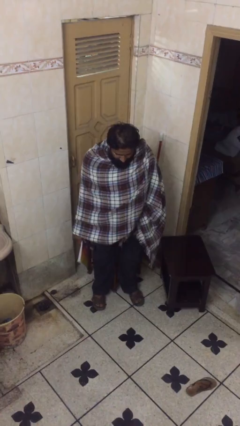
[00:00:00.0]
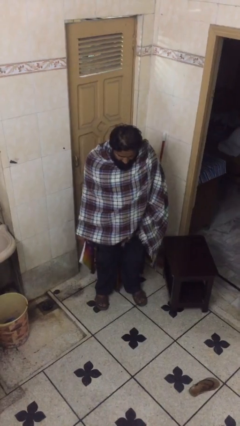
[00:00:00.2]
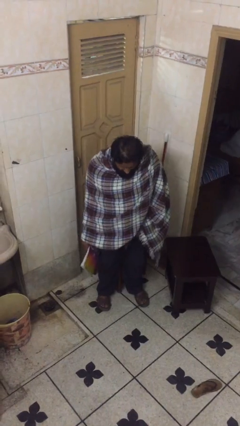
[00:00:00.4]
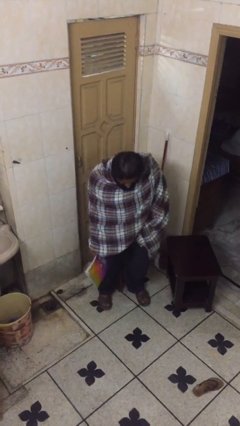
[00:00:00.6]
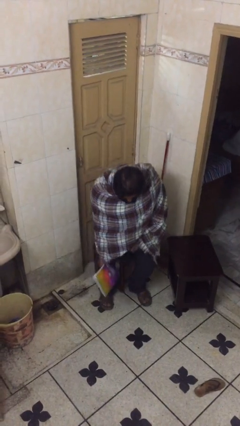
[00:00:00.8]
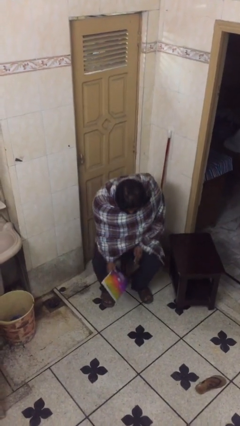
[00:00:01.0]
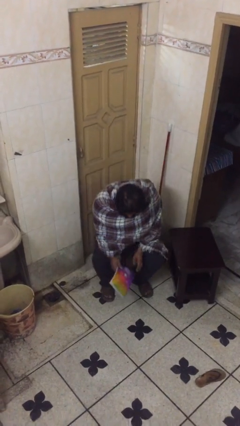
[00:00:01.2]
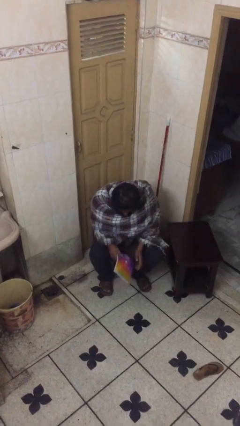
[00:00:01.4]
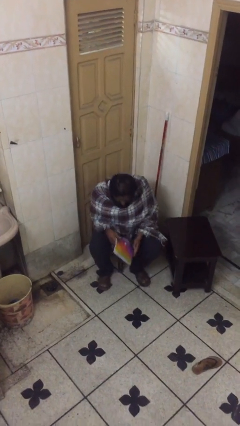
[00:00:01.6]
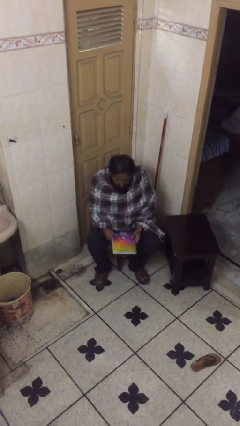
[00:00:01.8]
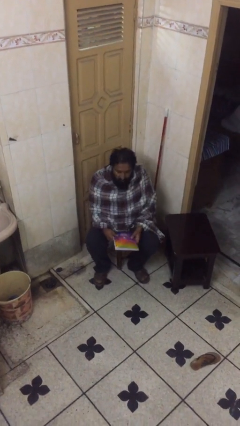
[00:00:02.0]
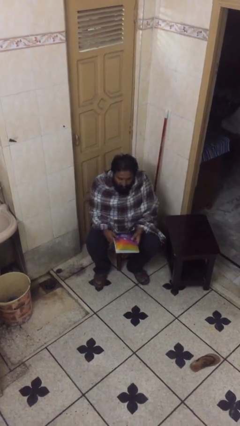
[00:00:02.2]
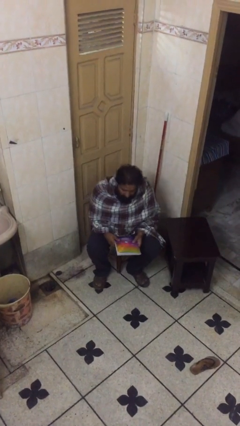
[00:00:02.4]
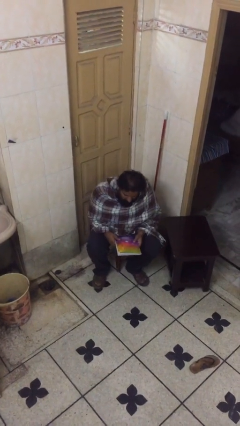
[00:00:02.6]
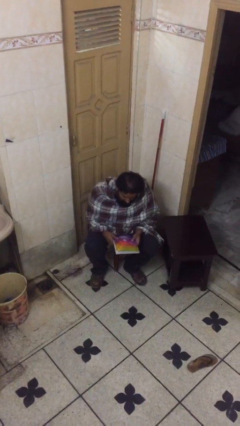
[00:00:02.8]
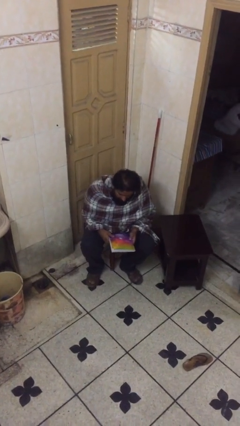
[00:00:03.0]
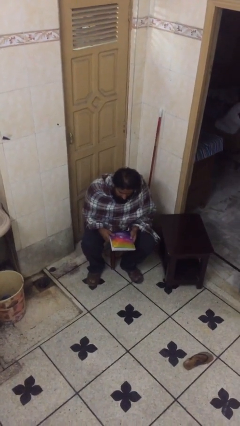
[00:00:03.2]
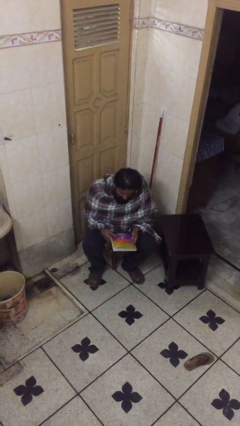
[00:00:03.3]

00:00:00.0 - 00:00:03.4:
person sits down

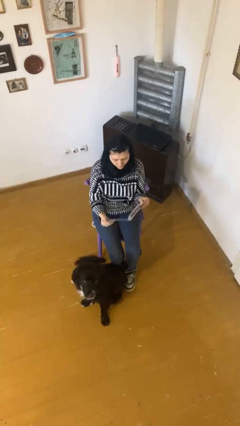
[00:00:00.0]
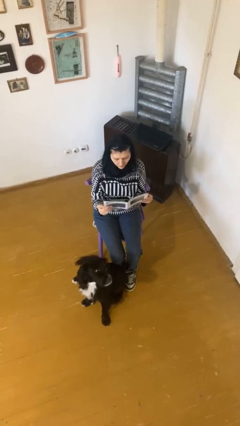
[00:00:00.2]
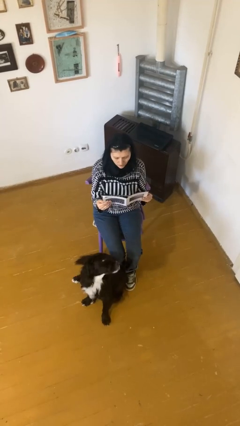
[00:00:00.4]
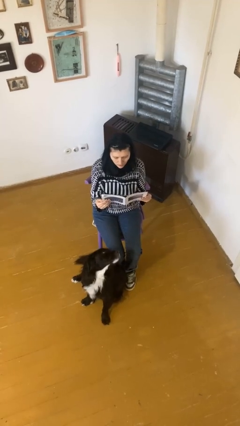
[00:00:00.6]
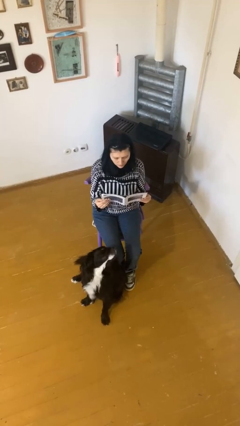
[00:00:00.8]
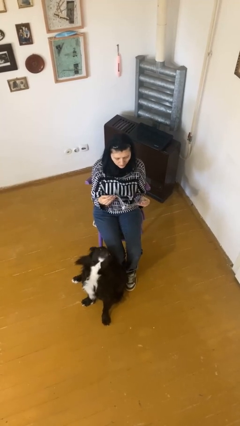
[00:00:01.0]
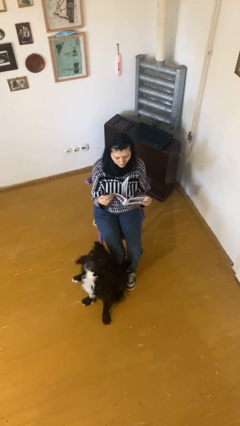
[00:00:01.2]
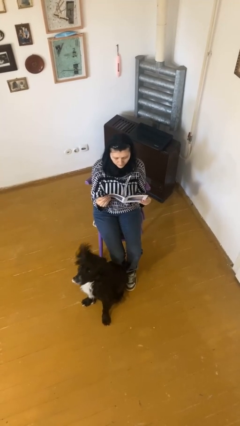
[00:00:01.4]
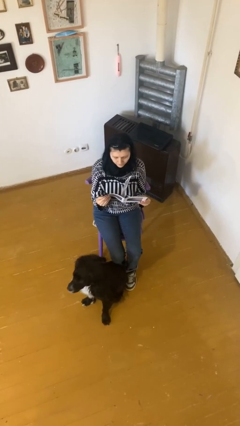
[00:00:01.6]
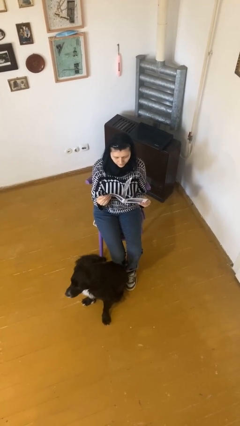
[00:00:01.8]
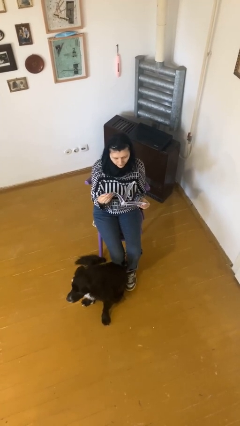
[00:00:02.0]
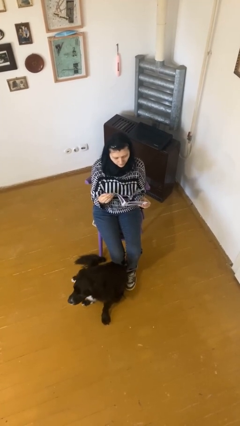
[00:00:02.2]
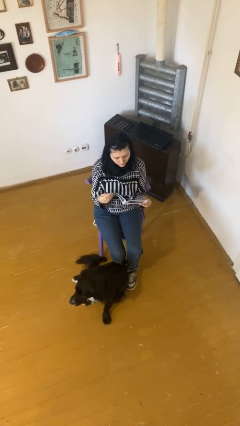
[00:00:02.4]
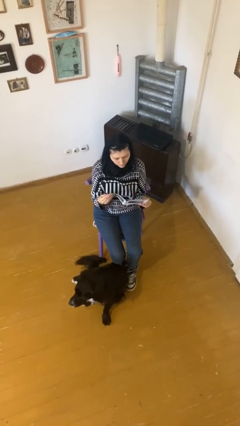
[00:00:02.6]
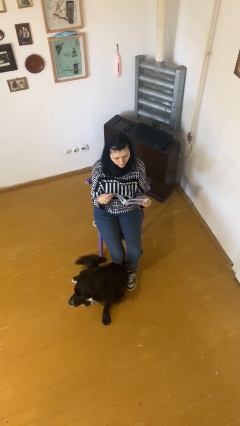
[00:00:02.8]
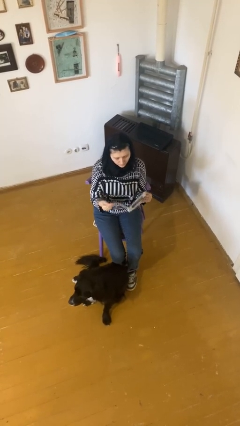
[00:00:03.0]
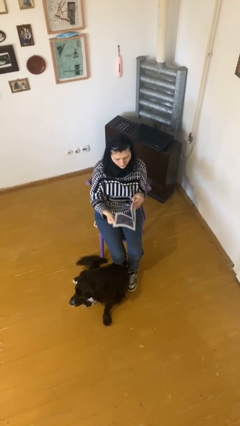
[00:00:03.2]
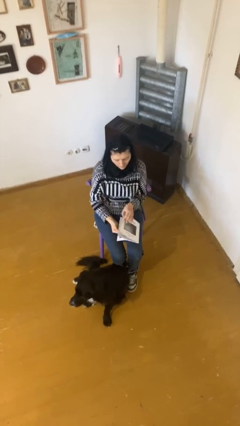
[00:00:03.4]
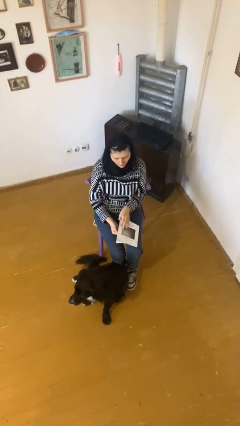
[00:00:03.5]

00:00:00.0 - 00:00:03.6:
person reads document

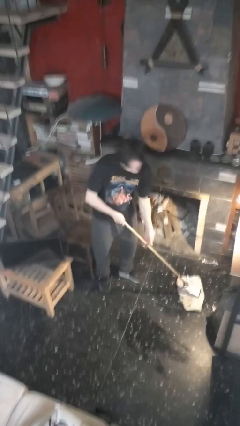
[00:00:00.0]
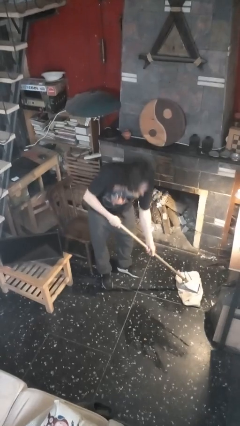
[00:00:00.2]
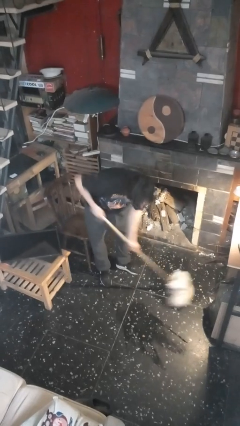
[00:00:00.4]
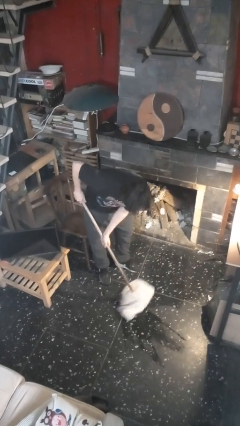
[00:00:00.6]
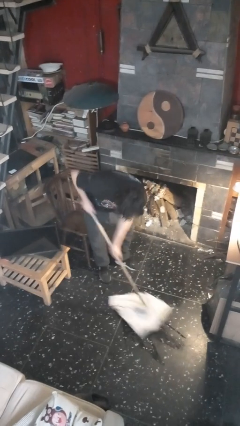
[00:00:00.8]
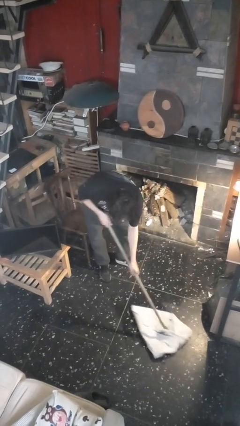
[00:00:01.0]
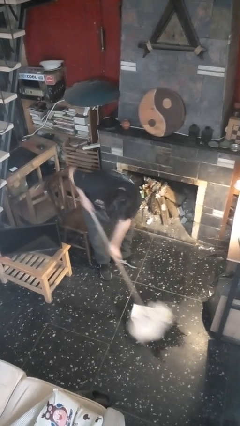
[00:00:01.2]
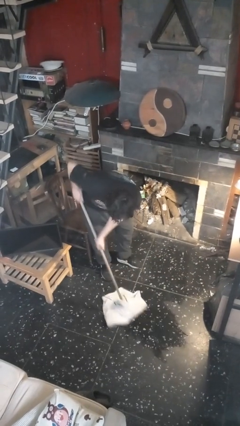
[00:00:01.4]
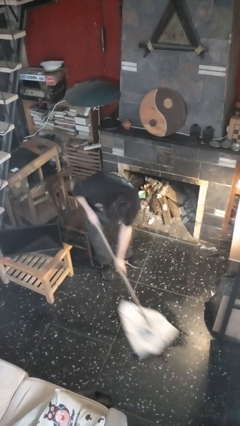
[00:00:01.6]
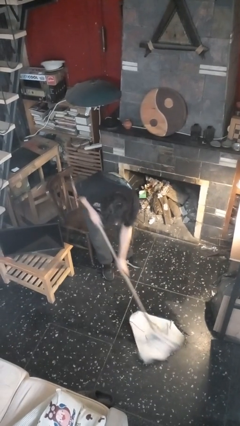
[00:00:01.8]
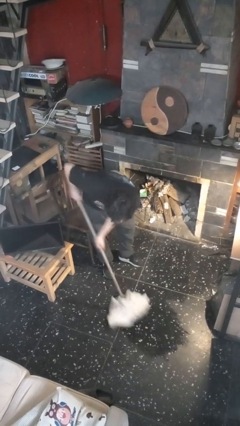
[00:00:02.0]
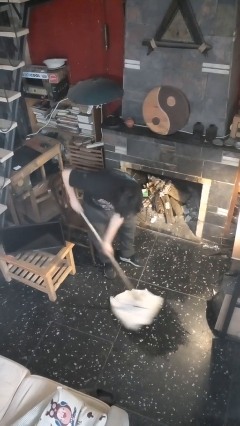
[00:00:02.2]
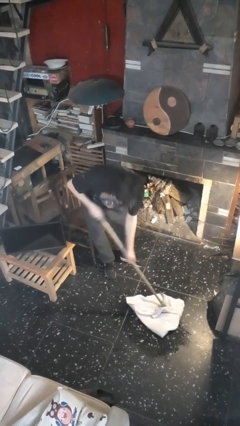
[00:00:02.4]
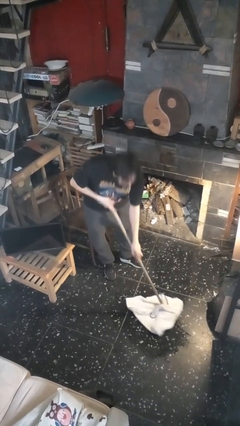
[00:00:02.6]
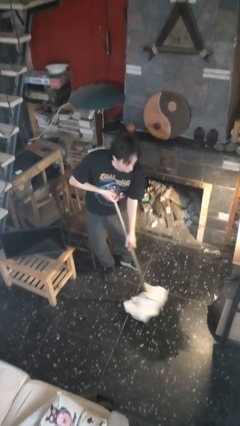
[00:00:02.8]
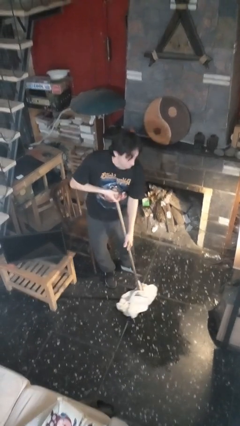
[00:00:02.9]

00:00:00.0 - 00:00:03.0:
person mops

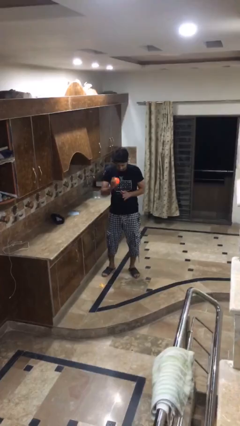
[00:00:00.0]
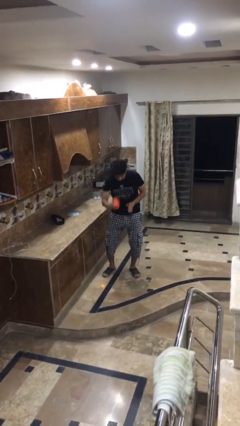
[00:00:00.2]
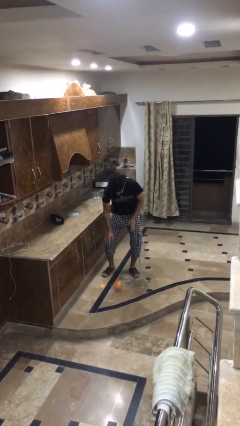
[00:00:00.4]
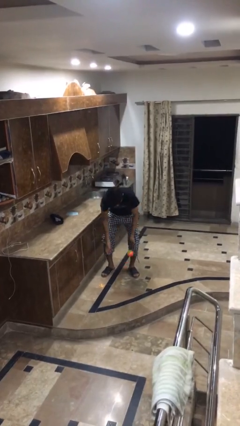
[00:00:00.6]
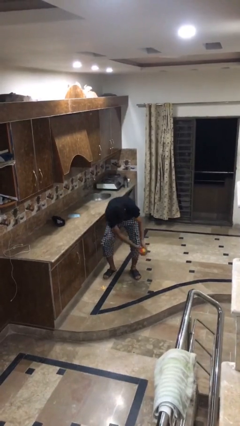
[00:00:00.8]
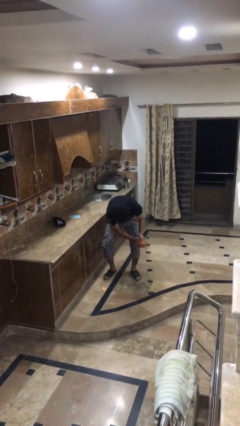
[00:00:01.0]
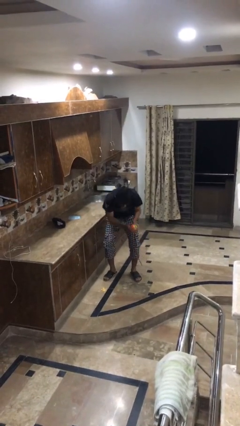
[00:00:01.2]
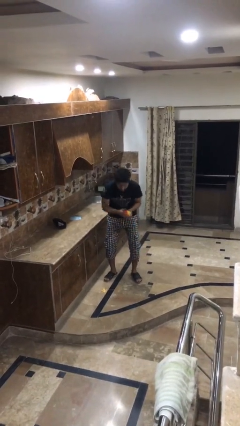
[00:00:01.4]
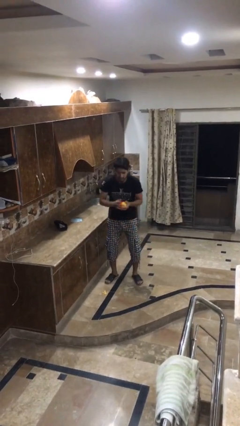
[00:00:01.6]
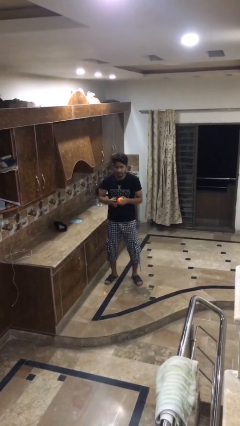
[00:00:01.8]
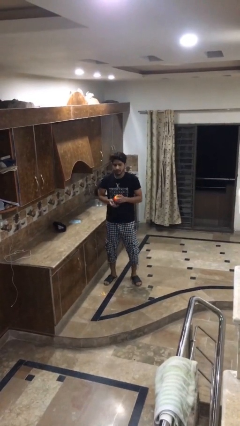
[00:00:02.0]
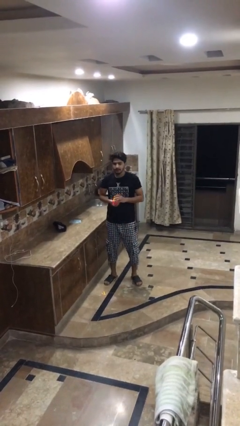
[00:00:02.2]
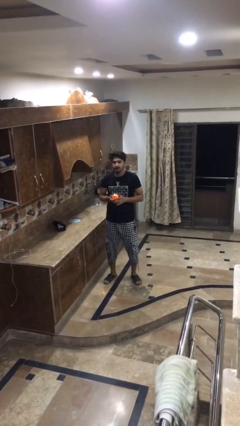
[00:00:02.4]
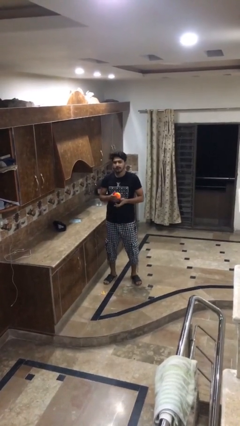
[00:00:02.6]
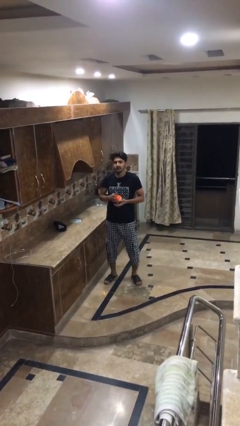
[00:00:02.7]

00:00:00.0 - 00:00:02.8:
person bounces ball on floor

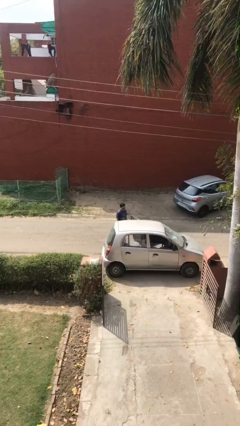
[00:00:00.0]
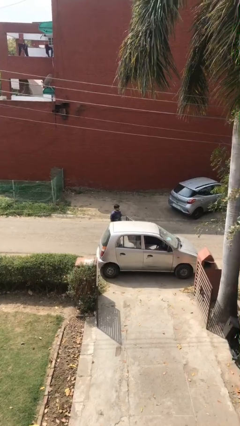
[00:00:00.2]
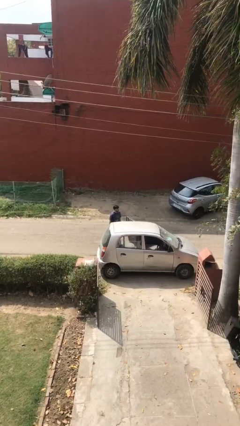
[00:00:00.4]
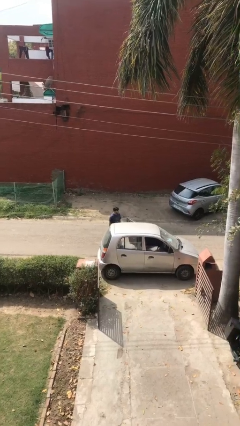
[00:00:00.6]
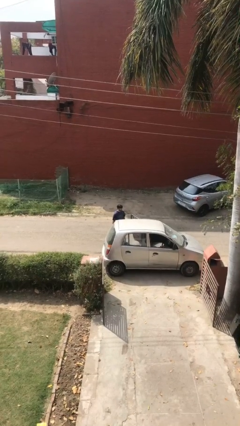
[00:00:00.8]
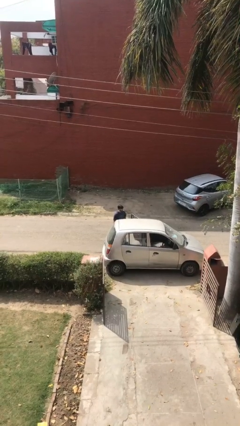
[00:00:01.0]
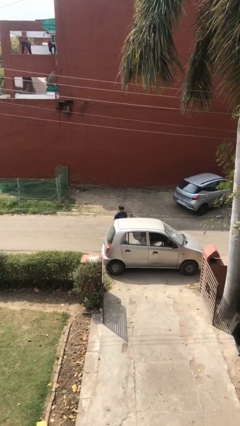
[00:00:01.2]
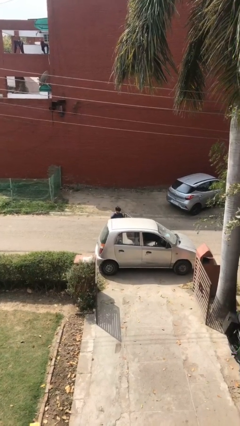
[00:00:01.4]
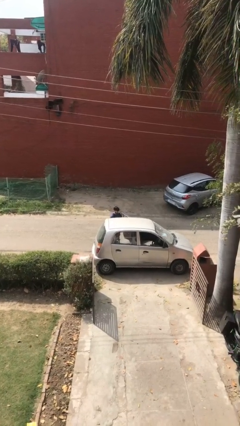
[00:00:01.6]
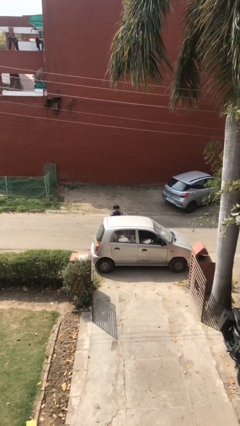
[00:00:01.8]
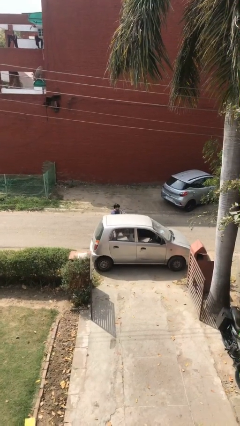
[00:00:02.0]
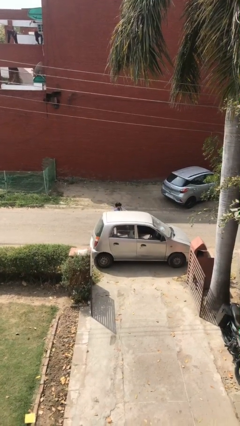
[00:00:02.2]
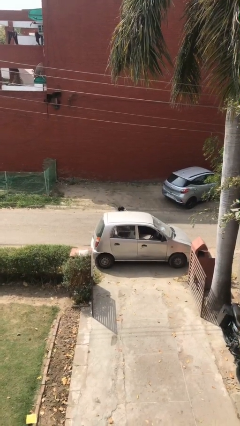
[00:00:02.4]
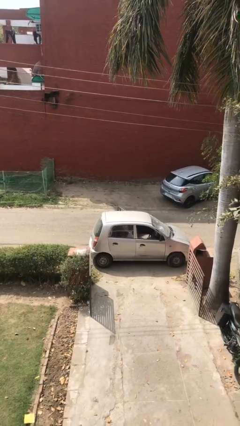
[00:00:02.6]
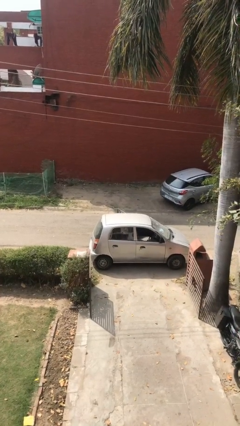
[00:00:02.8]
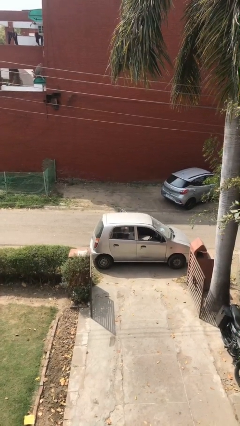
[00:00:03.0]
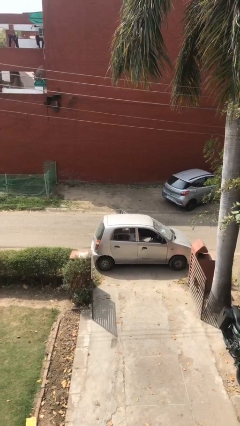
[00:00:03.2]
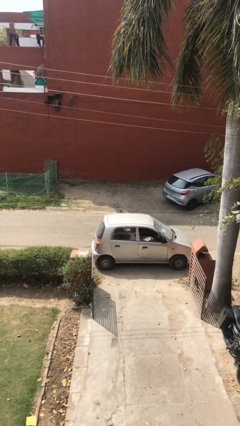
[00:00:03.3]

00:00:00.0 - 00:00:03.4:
person enters car

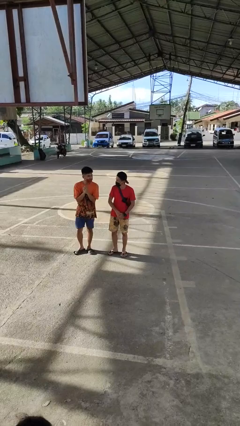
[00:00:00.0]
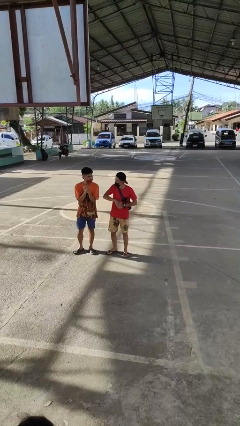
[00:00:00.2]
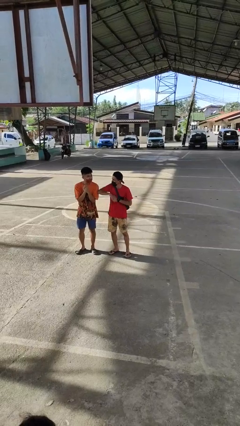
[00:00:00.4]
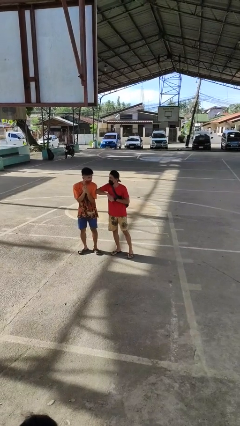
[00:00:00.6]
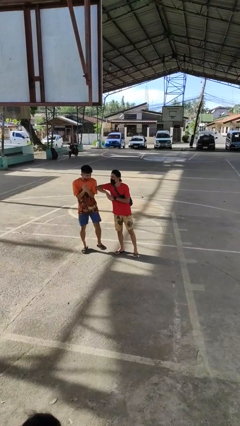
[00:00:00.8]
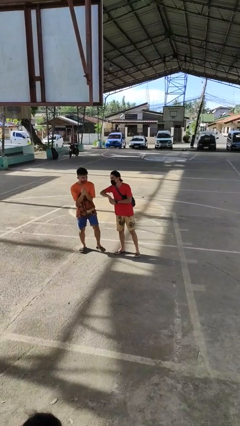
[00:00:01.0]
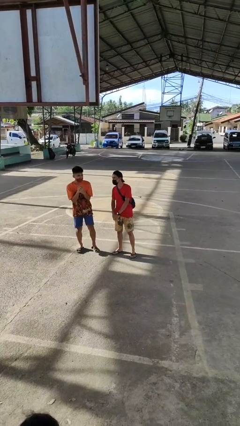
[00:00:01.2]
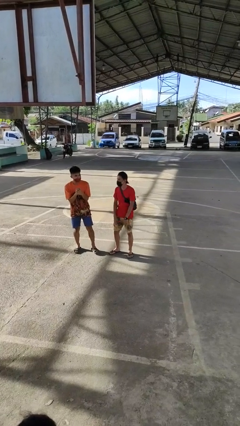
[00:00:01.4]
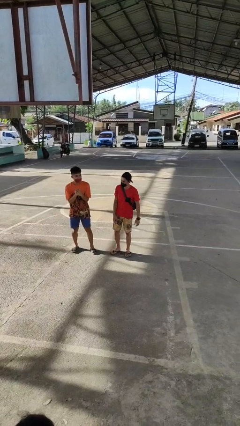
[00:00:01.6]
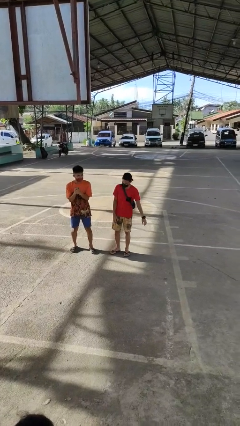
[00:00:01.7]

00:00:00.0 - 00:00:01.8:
person nudges person with elbow
